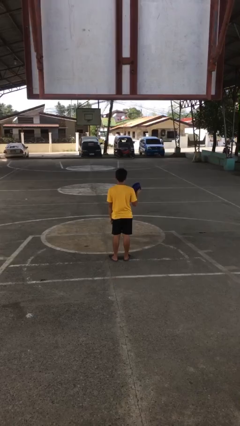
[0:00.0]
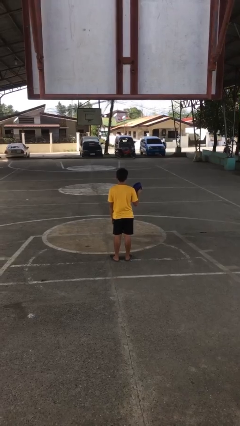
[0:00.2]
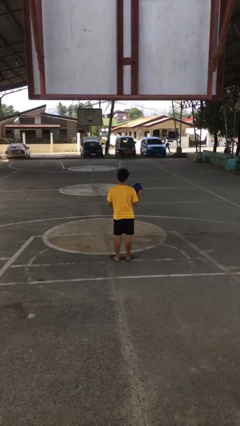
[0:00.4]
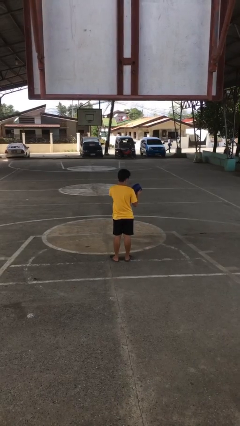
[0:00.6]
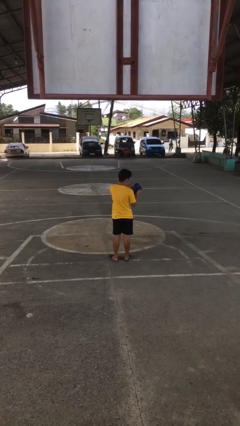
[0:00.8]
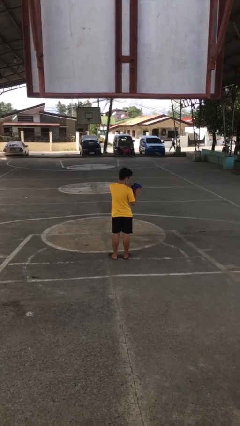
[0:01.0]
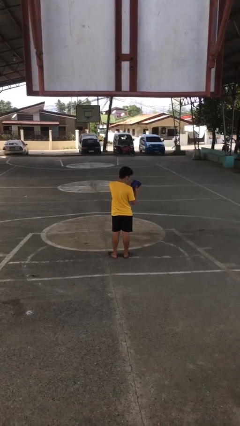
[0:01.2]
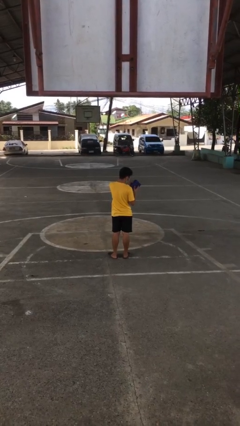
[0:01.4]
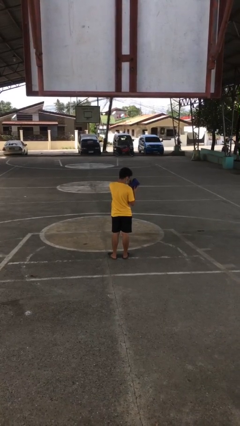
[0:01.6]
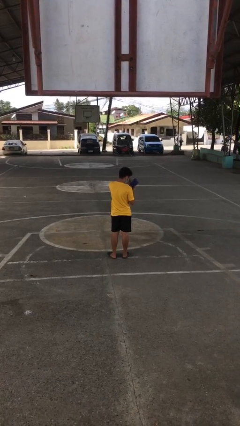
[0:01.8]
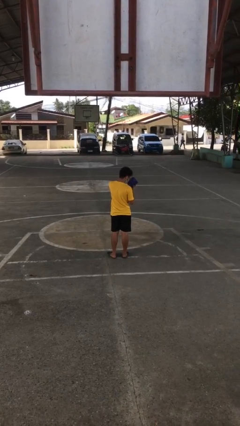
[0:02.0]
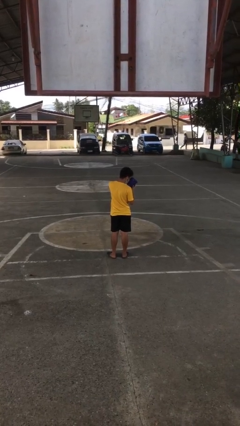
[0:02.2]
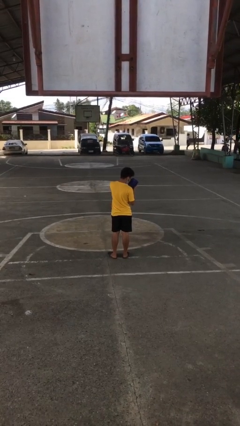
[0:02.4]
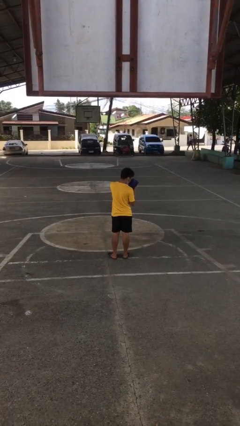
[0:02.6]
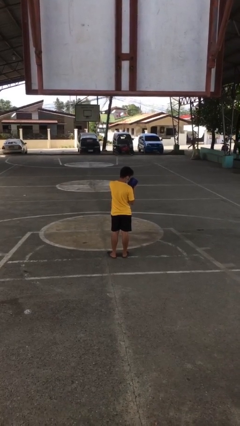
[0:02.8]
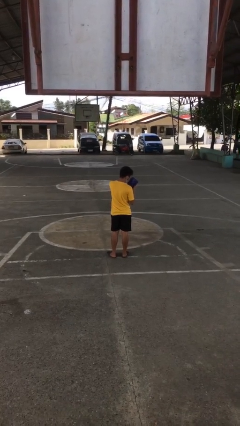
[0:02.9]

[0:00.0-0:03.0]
person searches in purse

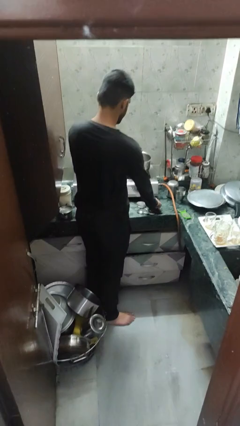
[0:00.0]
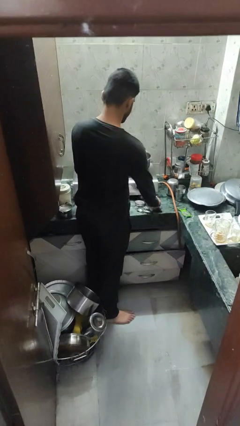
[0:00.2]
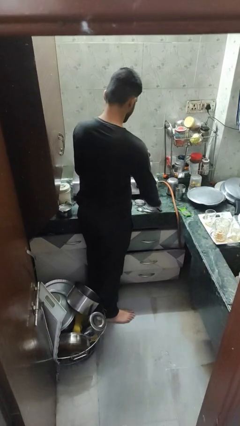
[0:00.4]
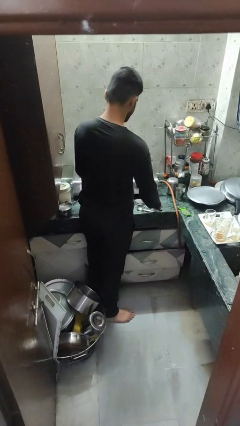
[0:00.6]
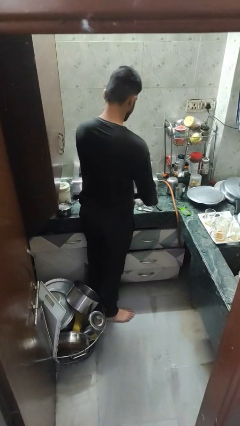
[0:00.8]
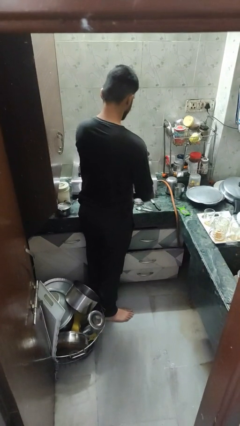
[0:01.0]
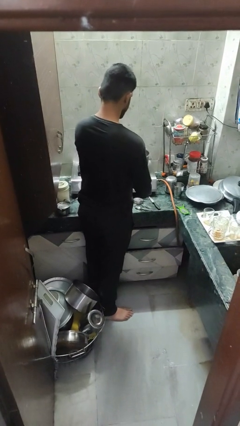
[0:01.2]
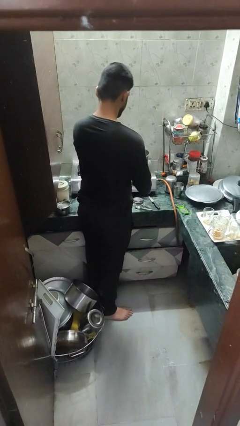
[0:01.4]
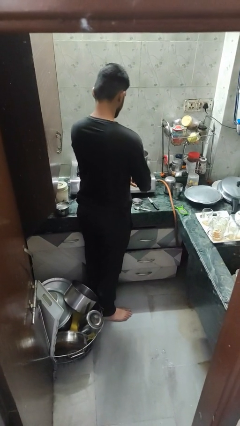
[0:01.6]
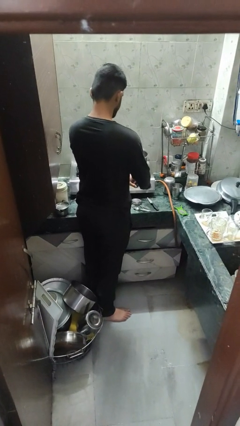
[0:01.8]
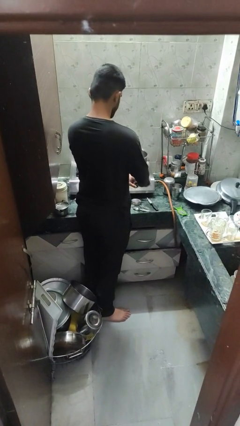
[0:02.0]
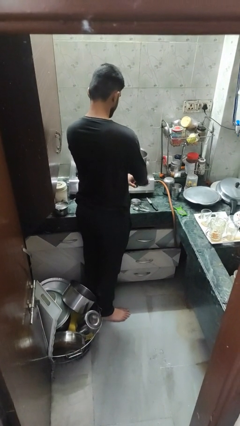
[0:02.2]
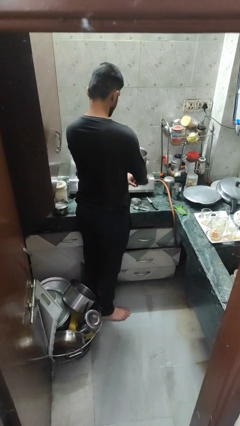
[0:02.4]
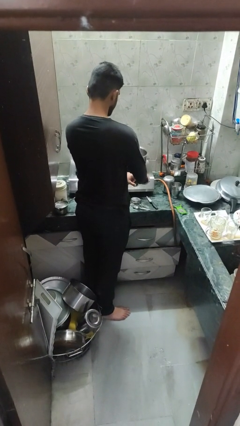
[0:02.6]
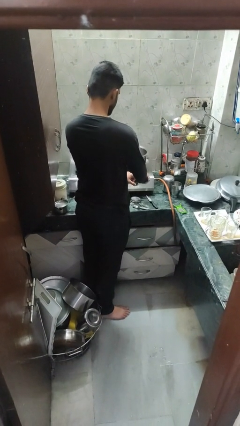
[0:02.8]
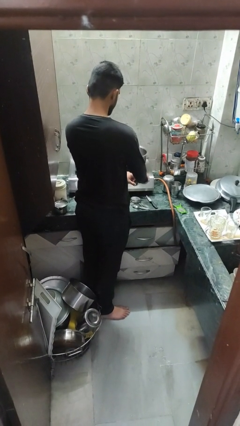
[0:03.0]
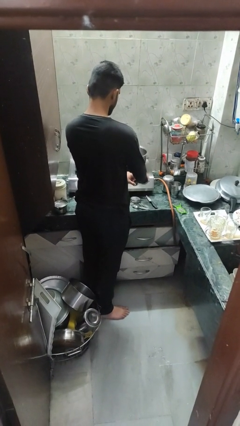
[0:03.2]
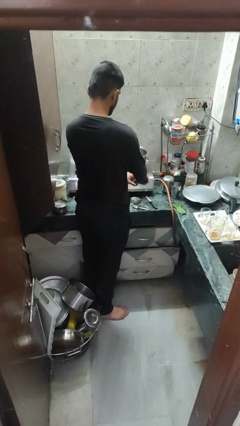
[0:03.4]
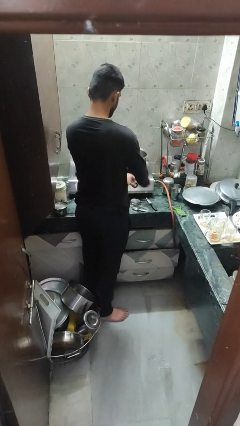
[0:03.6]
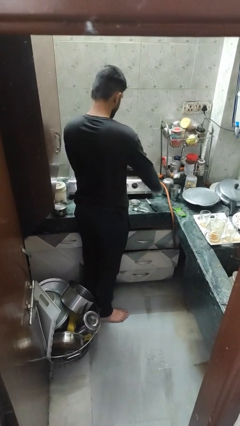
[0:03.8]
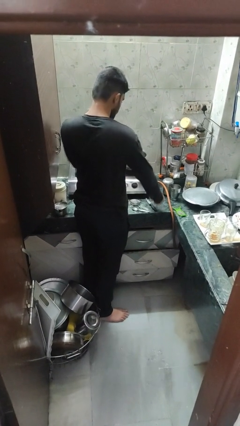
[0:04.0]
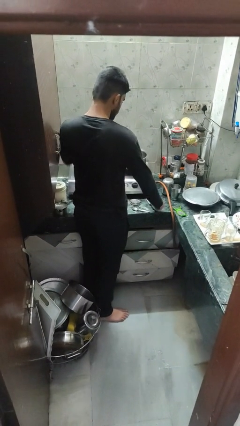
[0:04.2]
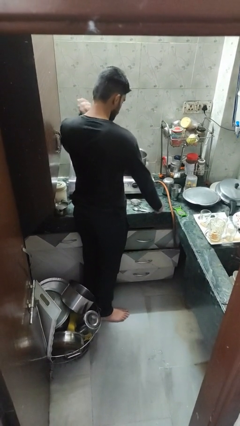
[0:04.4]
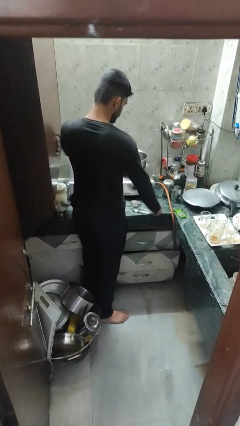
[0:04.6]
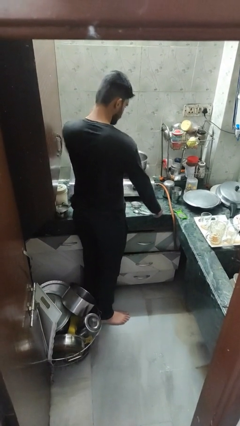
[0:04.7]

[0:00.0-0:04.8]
person burns hand

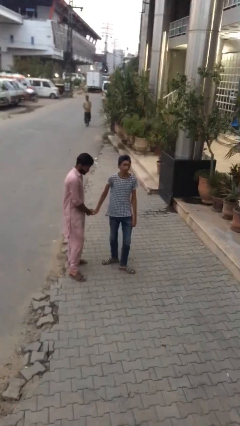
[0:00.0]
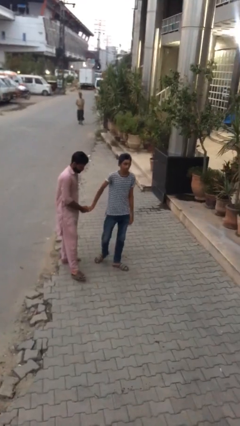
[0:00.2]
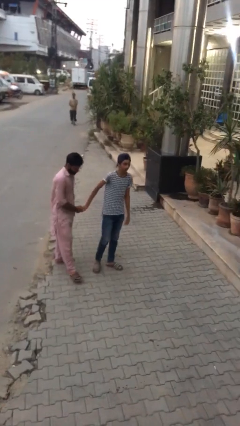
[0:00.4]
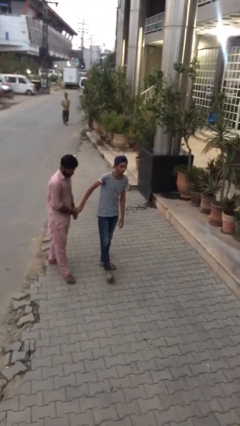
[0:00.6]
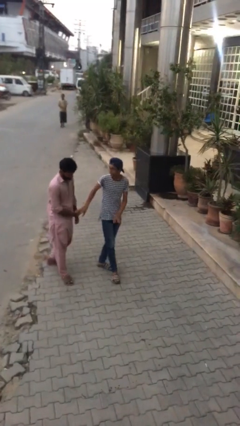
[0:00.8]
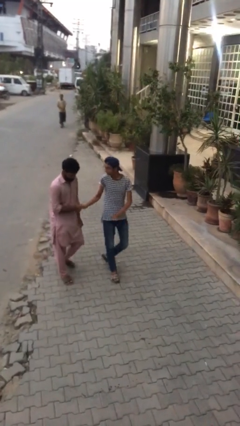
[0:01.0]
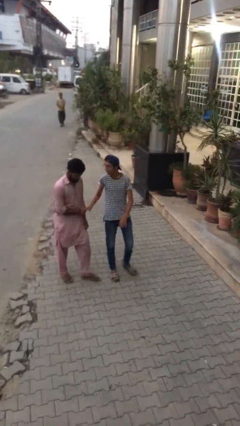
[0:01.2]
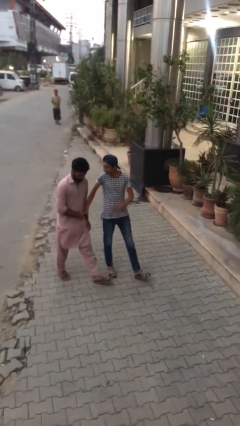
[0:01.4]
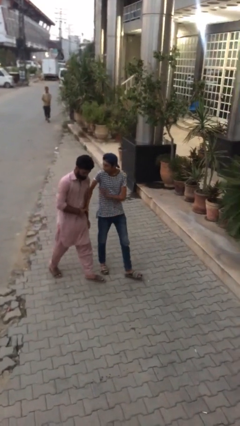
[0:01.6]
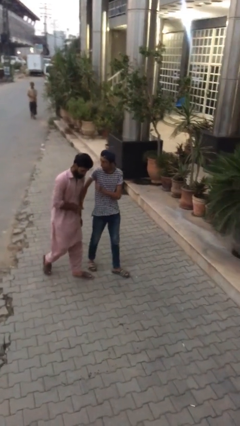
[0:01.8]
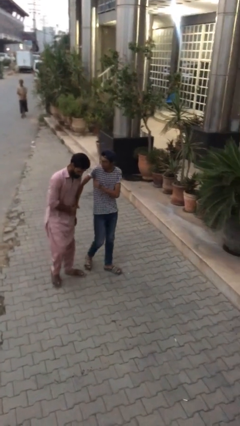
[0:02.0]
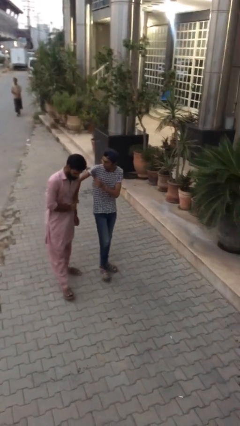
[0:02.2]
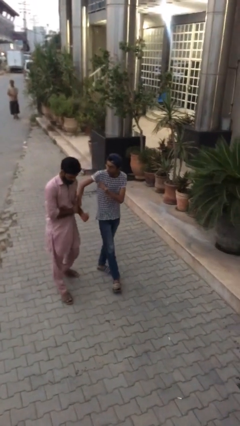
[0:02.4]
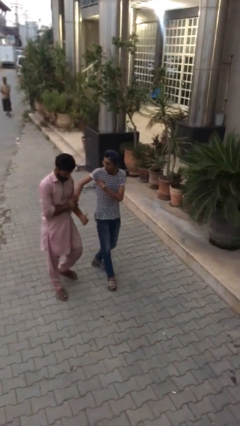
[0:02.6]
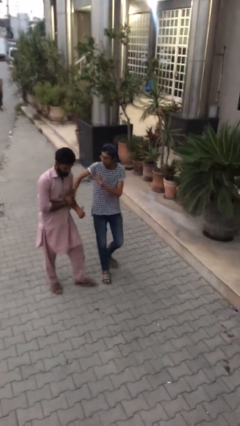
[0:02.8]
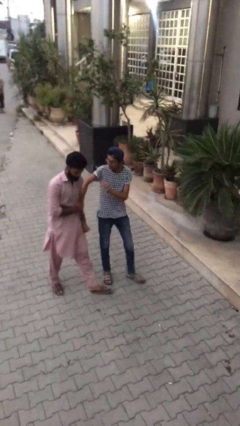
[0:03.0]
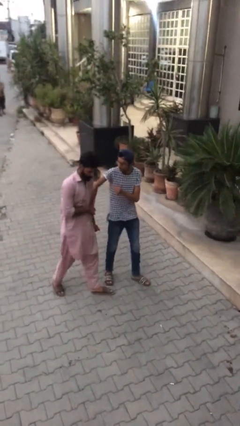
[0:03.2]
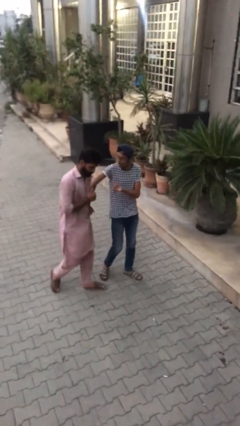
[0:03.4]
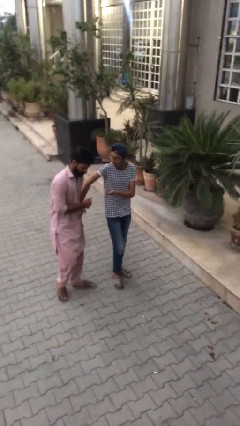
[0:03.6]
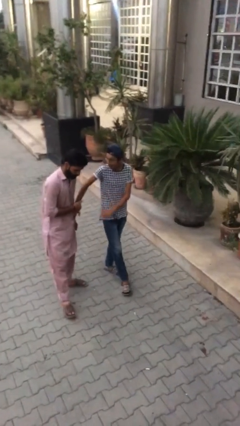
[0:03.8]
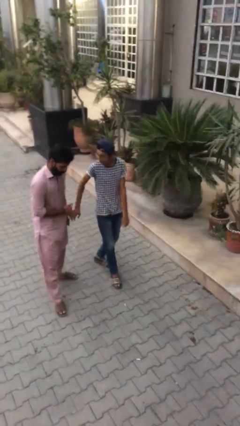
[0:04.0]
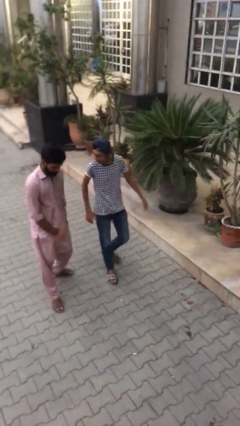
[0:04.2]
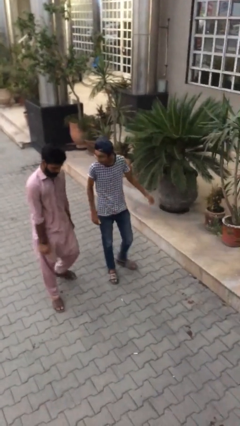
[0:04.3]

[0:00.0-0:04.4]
person talks to person

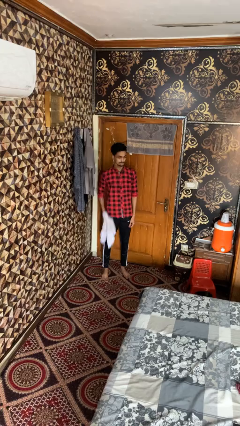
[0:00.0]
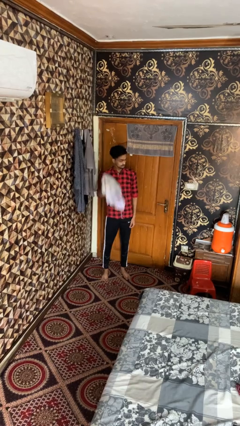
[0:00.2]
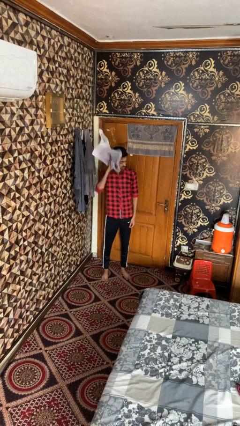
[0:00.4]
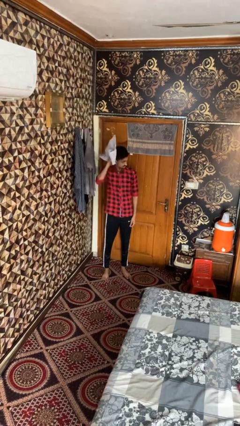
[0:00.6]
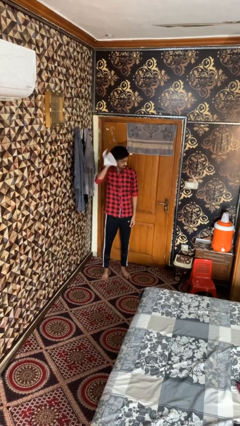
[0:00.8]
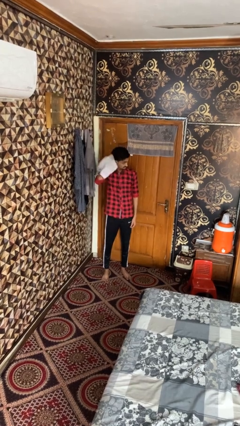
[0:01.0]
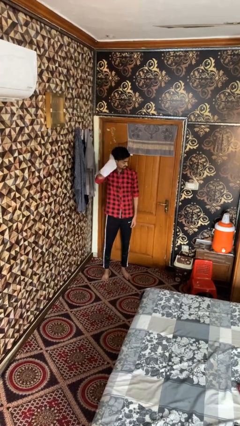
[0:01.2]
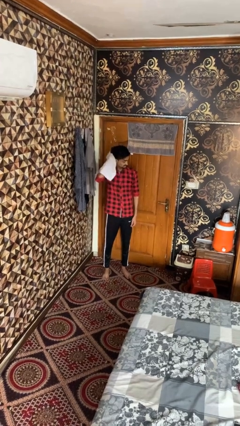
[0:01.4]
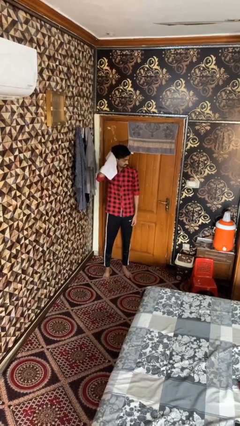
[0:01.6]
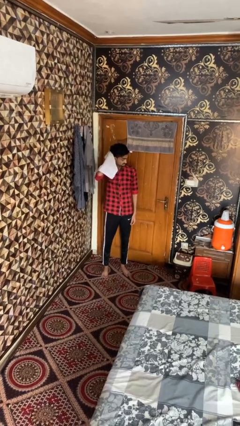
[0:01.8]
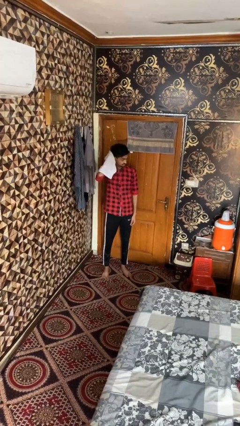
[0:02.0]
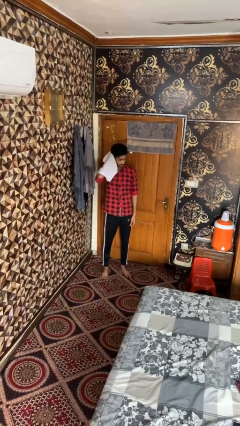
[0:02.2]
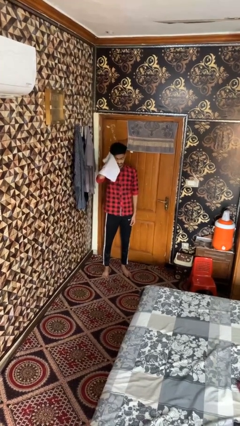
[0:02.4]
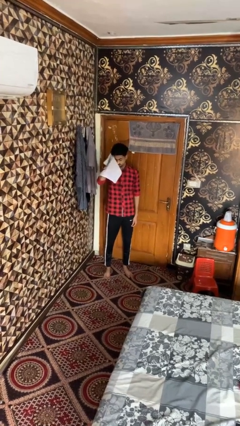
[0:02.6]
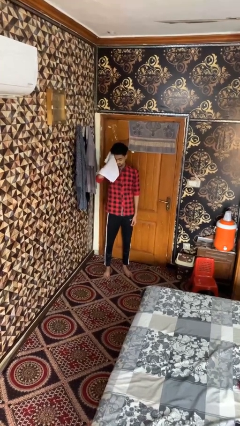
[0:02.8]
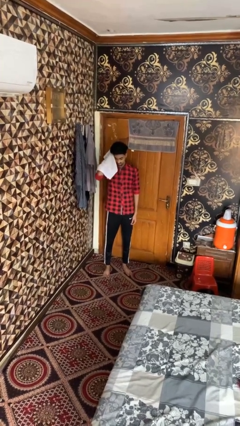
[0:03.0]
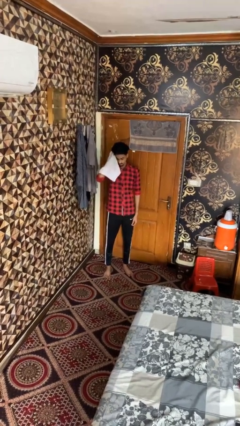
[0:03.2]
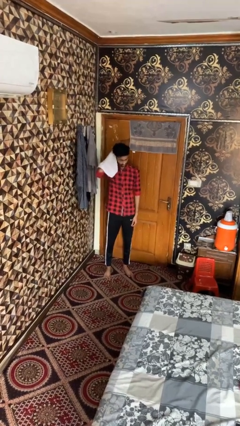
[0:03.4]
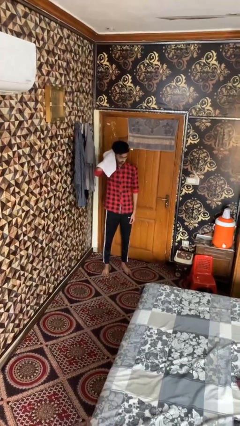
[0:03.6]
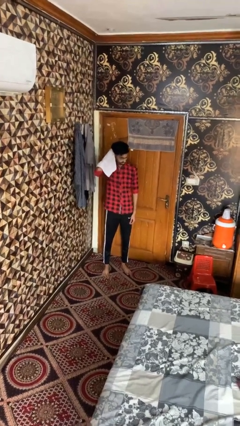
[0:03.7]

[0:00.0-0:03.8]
person dries hair with towel

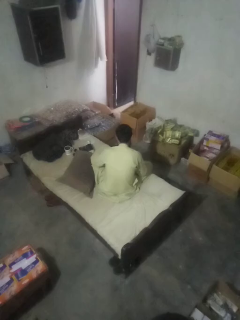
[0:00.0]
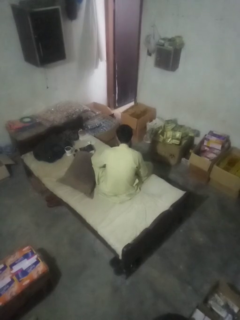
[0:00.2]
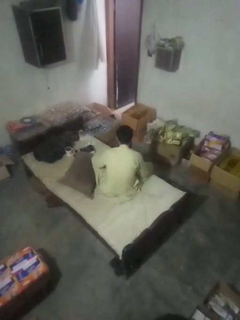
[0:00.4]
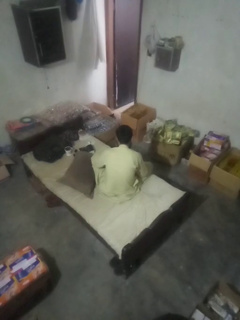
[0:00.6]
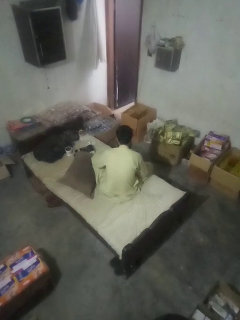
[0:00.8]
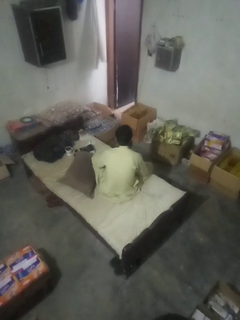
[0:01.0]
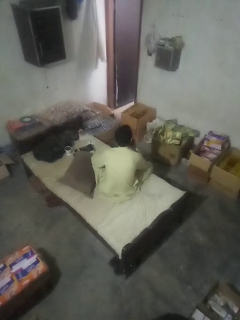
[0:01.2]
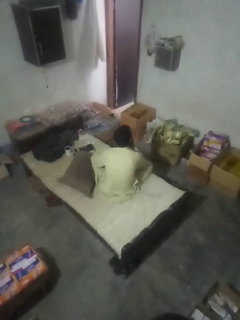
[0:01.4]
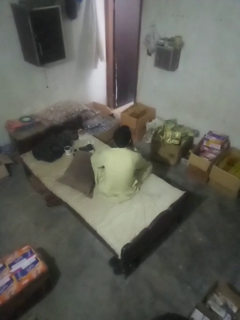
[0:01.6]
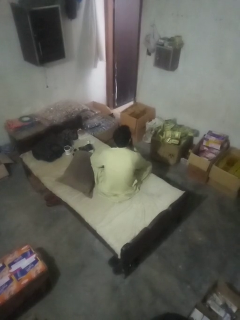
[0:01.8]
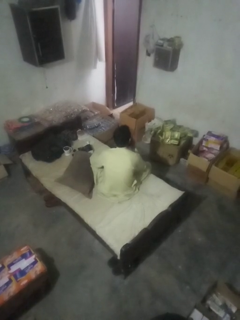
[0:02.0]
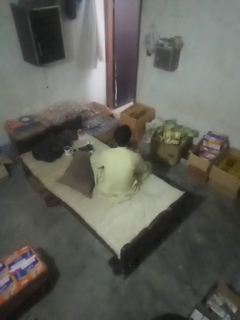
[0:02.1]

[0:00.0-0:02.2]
person gestures be quiet
